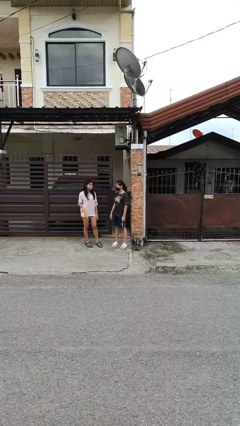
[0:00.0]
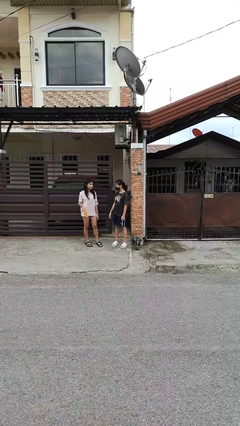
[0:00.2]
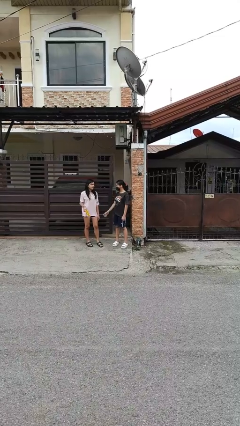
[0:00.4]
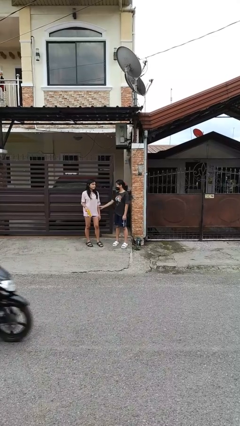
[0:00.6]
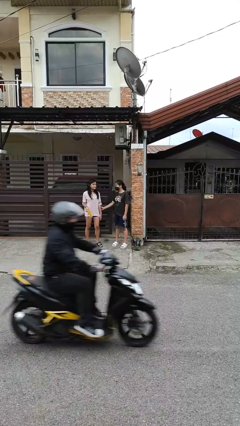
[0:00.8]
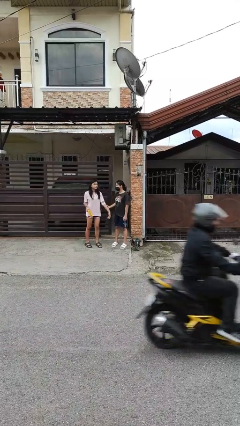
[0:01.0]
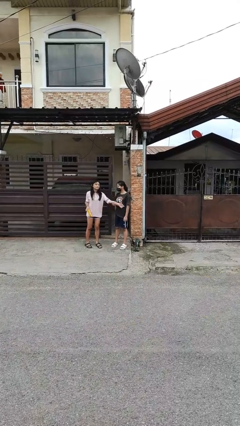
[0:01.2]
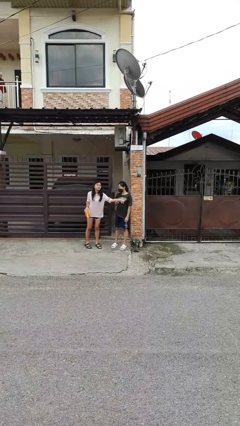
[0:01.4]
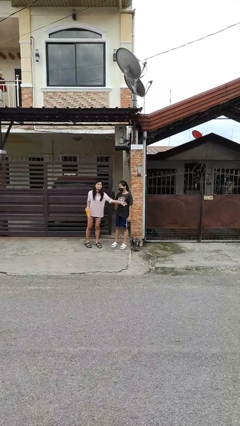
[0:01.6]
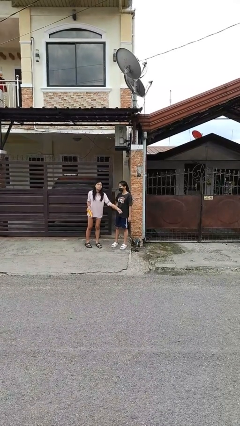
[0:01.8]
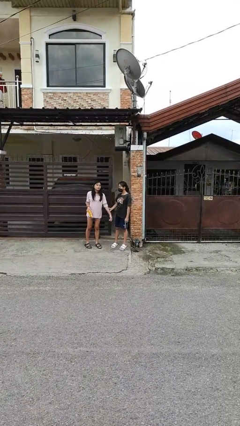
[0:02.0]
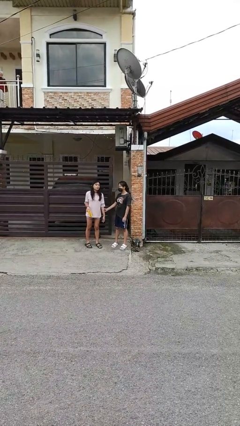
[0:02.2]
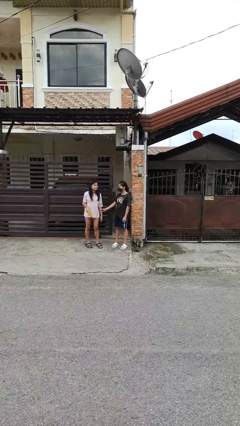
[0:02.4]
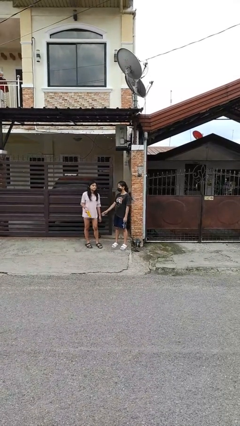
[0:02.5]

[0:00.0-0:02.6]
person grabs person by forearm

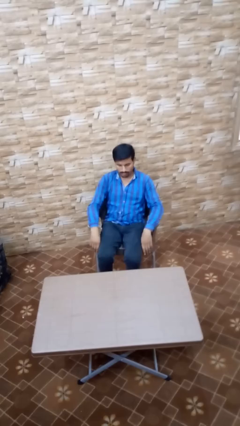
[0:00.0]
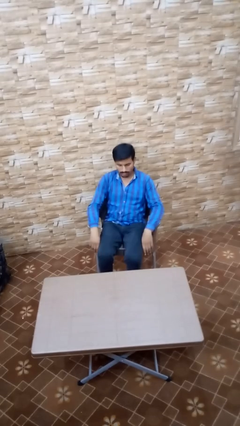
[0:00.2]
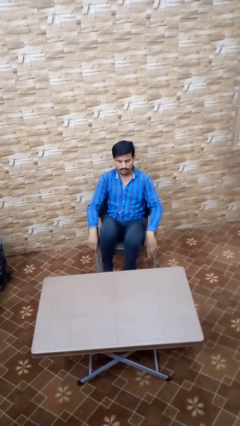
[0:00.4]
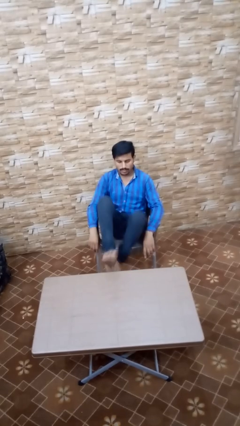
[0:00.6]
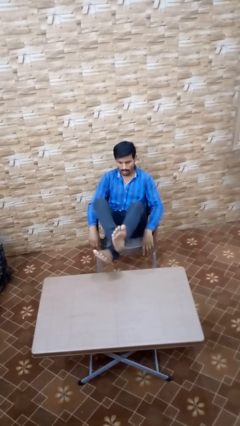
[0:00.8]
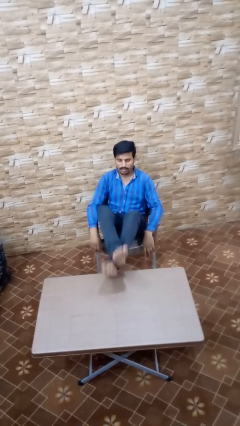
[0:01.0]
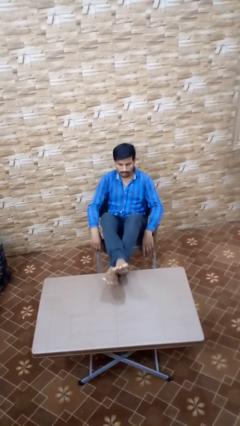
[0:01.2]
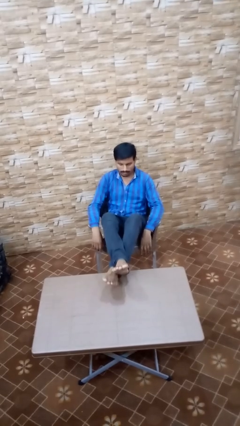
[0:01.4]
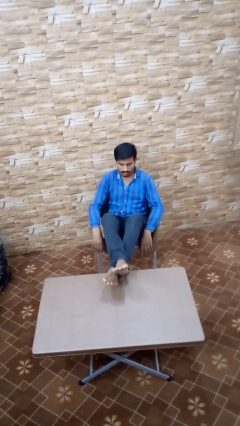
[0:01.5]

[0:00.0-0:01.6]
person puts feet up

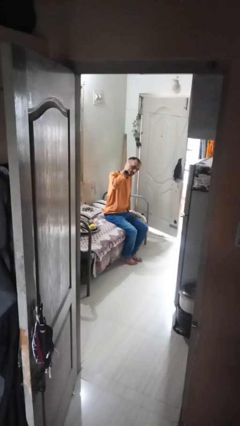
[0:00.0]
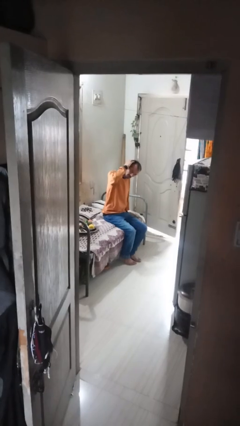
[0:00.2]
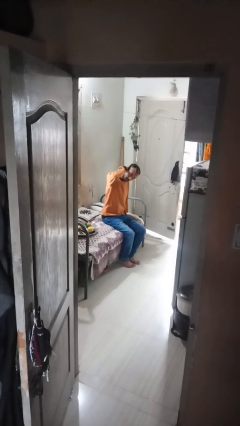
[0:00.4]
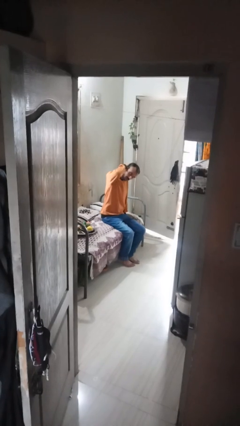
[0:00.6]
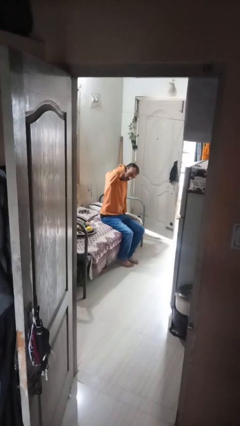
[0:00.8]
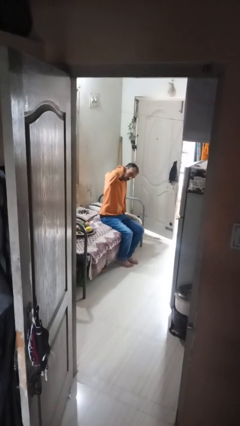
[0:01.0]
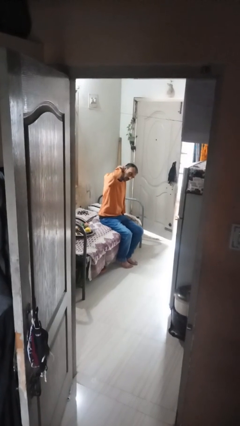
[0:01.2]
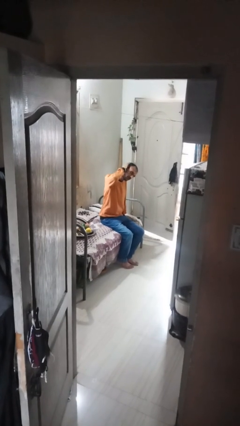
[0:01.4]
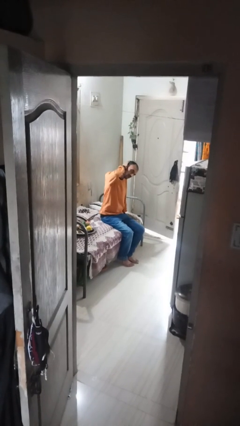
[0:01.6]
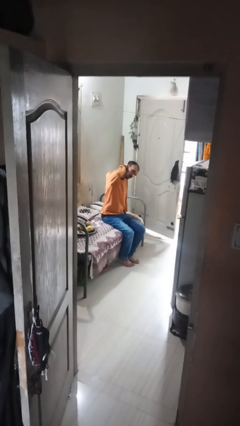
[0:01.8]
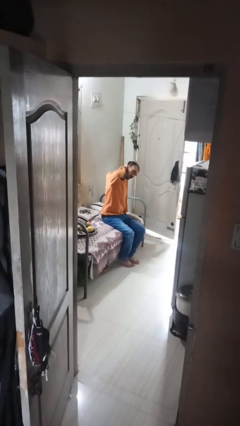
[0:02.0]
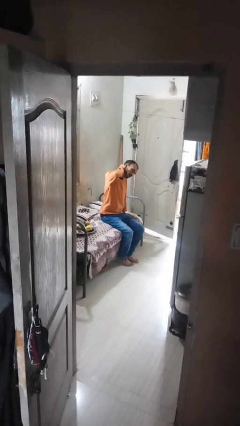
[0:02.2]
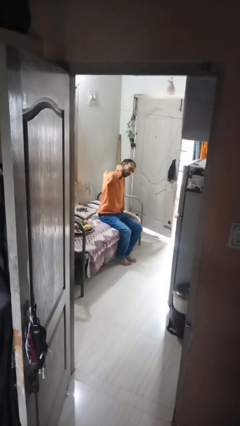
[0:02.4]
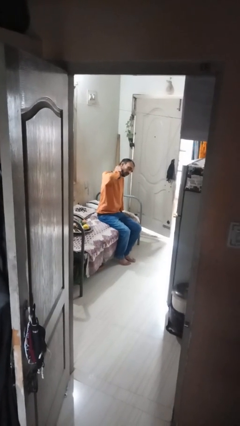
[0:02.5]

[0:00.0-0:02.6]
person strokes hair

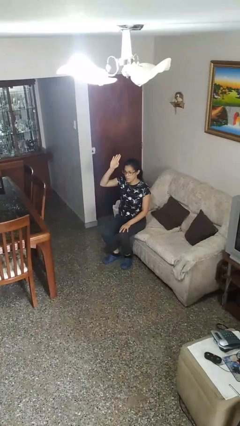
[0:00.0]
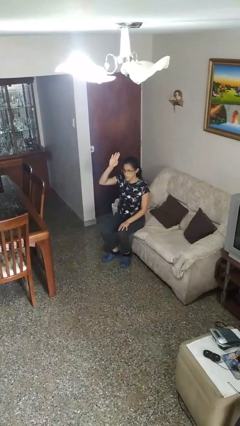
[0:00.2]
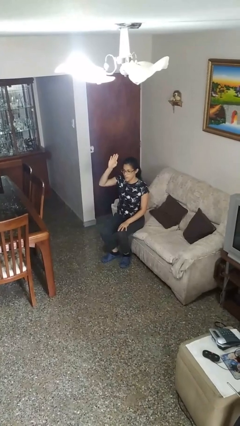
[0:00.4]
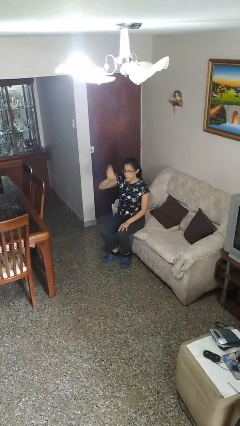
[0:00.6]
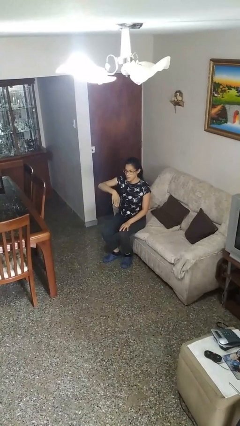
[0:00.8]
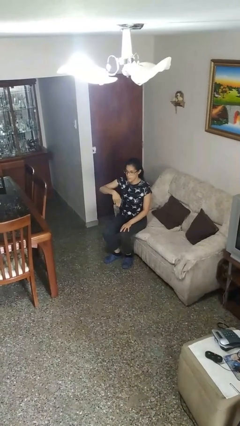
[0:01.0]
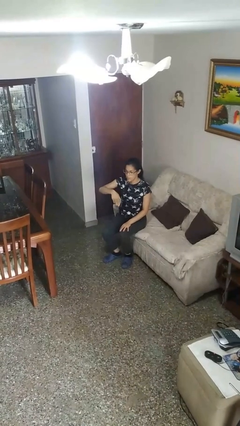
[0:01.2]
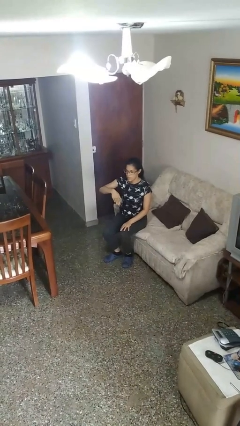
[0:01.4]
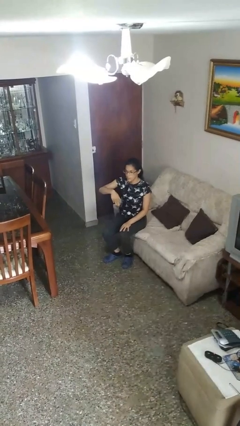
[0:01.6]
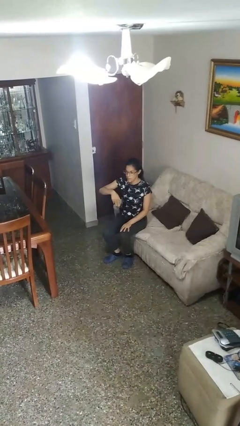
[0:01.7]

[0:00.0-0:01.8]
person gestures swipe down

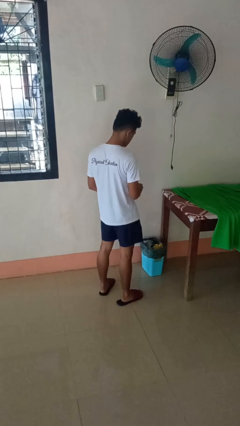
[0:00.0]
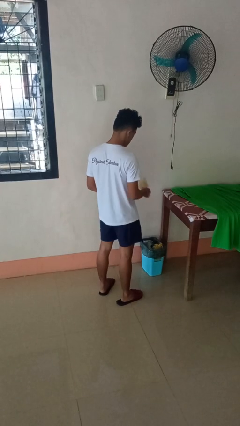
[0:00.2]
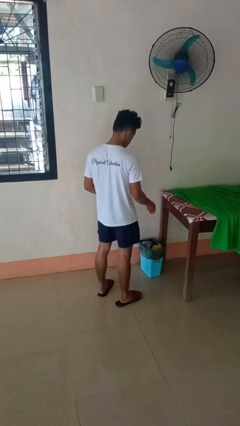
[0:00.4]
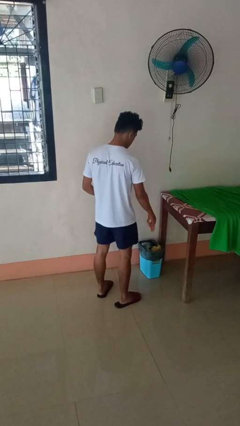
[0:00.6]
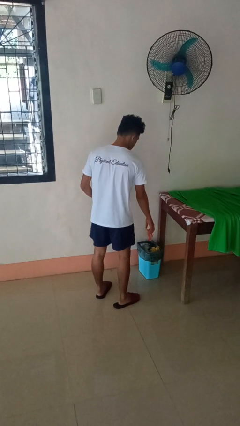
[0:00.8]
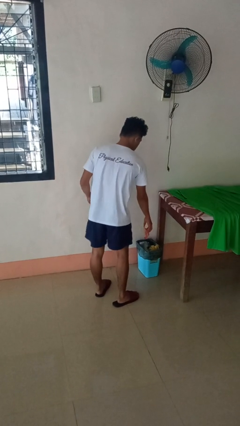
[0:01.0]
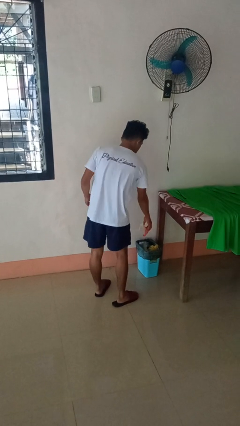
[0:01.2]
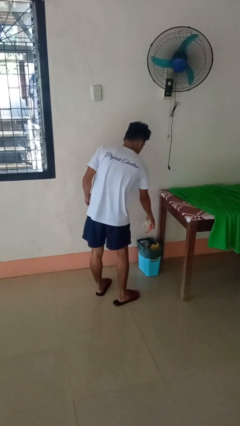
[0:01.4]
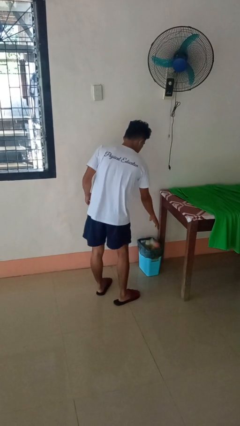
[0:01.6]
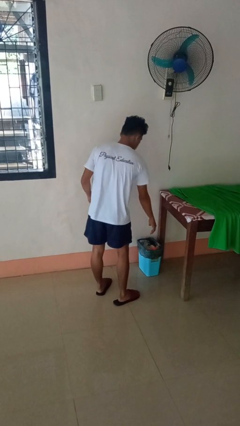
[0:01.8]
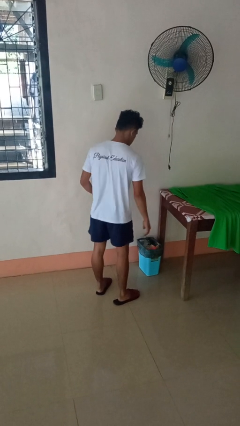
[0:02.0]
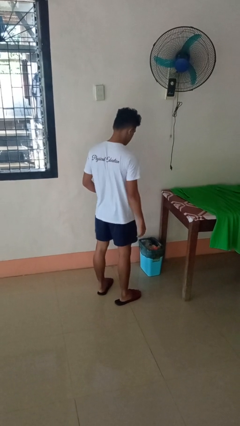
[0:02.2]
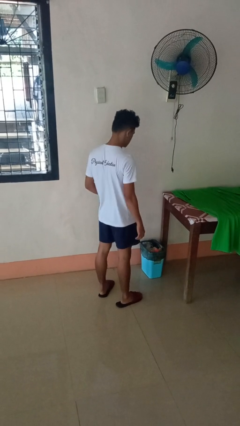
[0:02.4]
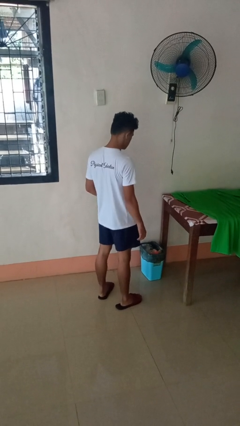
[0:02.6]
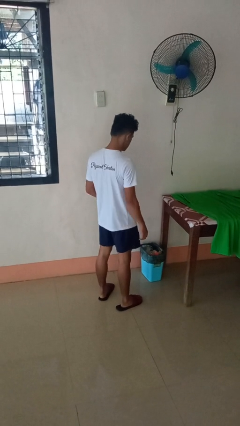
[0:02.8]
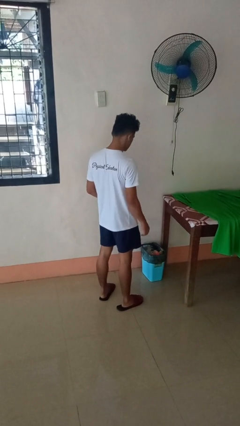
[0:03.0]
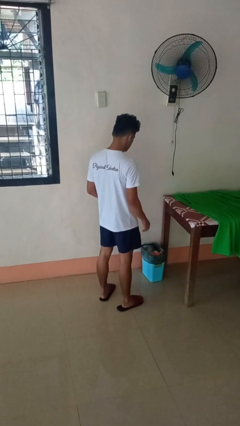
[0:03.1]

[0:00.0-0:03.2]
person discards trash

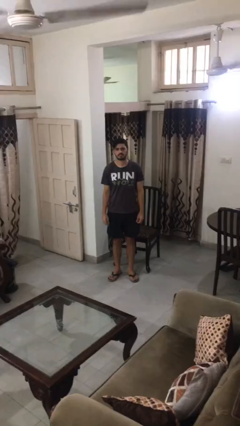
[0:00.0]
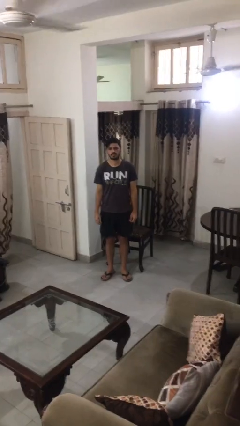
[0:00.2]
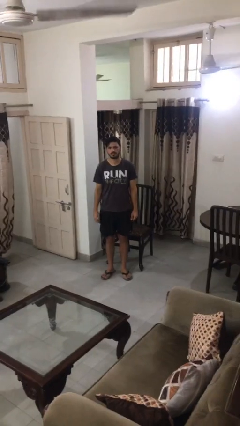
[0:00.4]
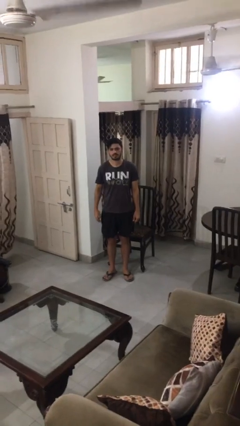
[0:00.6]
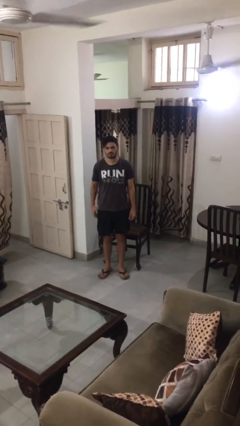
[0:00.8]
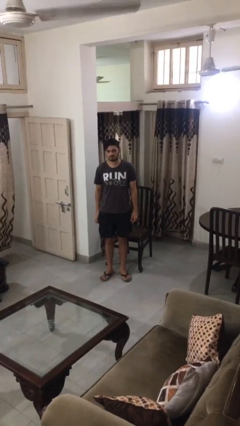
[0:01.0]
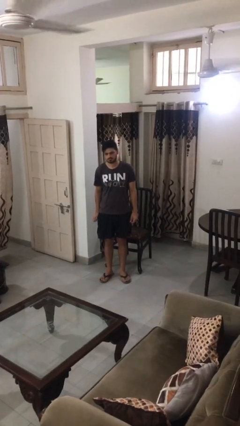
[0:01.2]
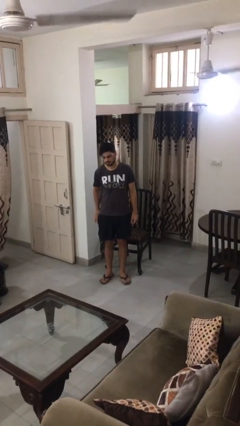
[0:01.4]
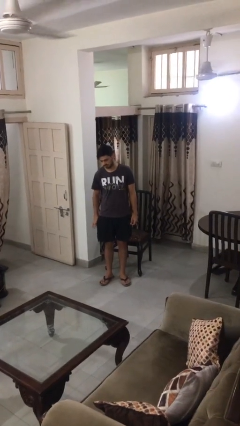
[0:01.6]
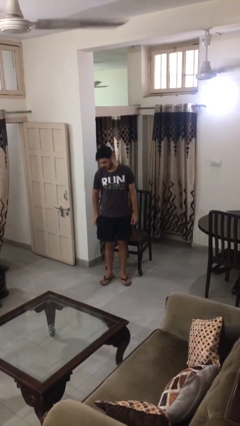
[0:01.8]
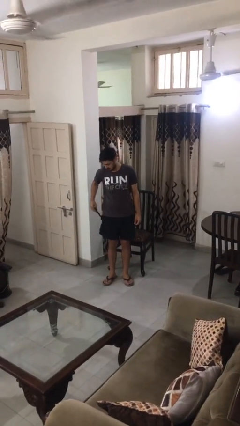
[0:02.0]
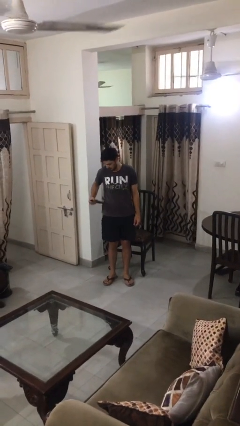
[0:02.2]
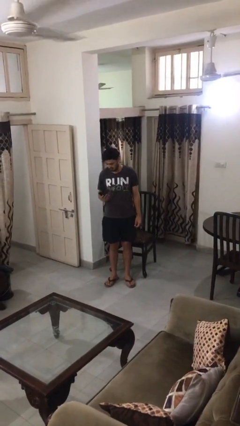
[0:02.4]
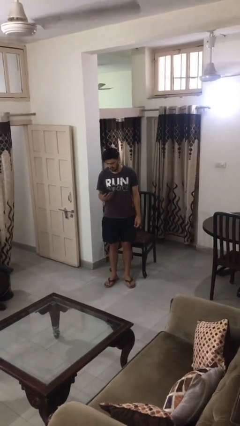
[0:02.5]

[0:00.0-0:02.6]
person takes phone from pocket

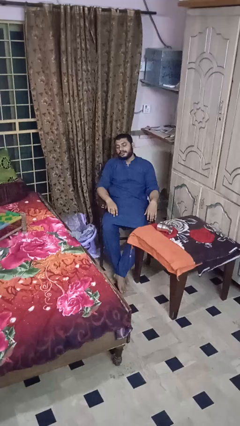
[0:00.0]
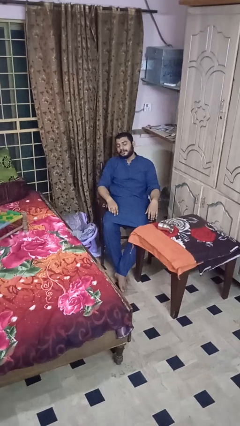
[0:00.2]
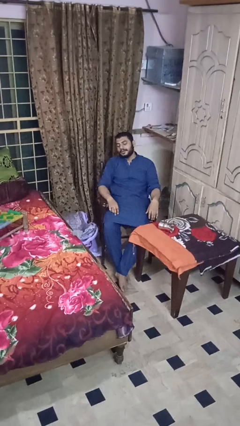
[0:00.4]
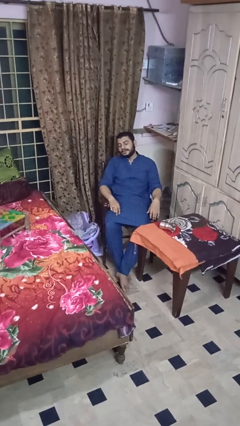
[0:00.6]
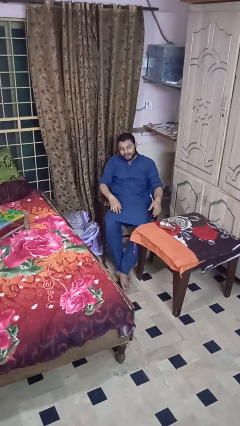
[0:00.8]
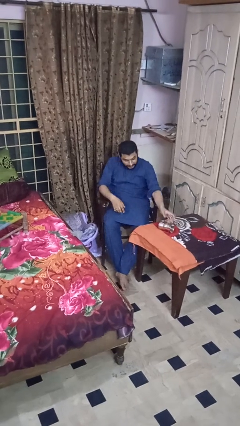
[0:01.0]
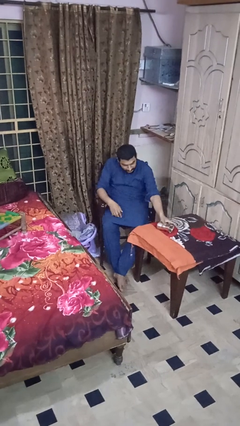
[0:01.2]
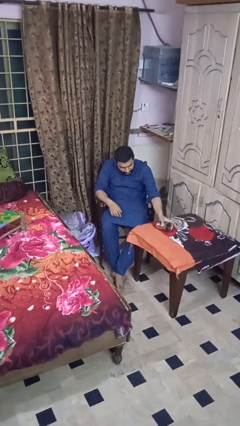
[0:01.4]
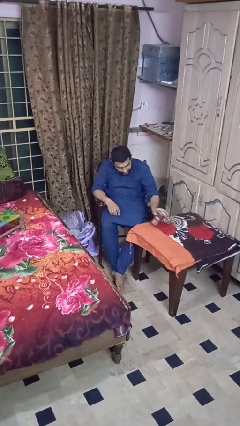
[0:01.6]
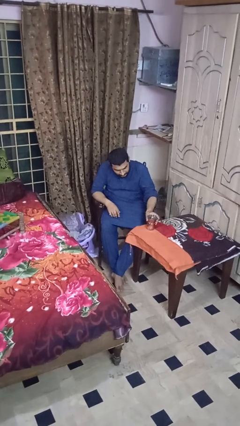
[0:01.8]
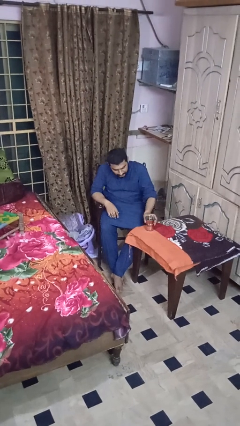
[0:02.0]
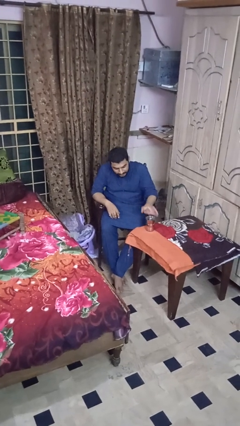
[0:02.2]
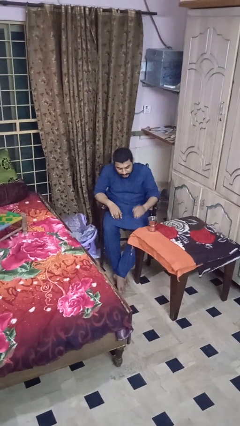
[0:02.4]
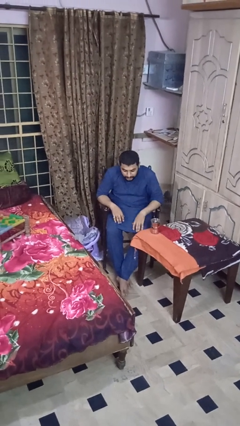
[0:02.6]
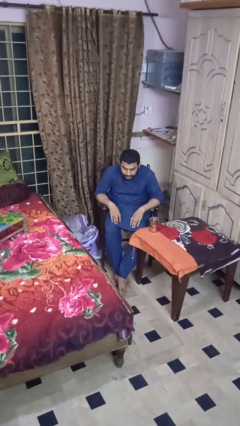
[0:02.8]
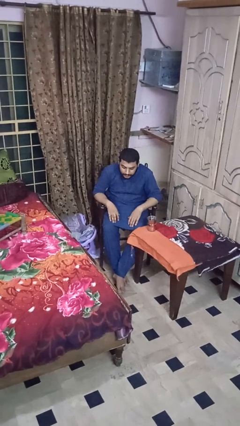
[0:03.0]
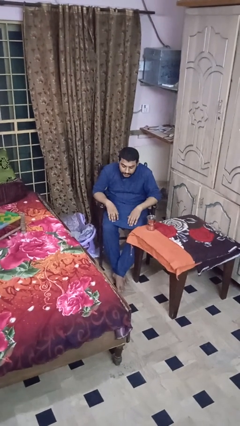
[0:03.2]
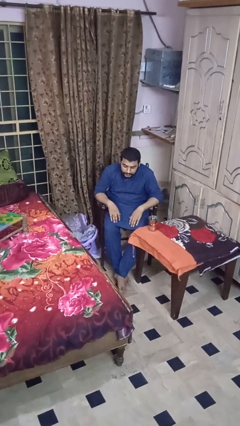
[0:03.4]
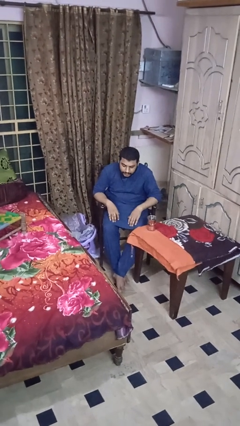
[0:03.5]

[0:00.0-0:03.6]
person sets upright glass
